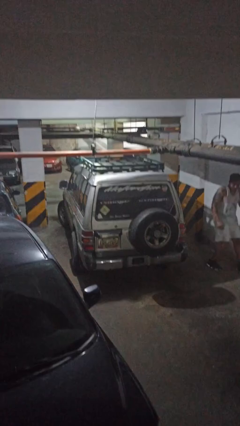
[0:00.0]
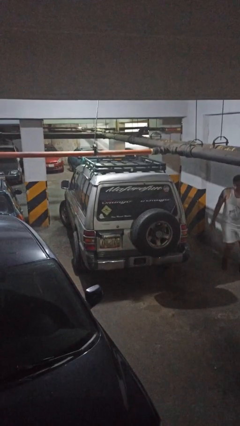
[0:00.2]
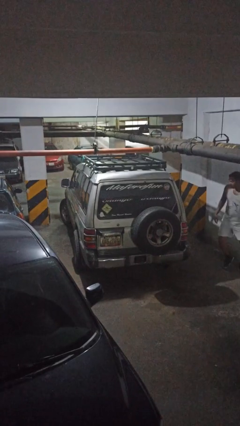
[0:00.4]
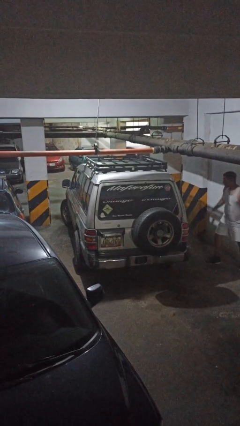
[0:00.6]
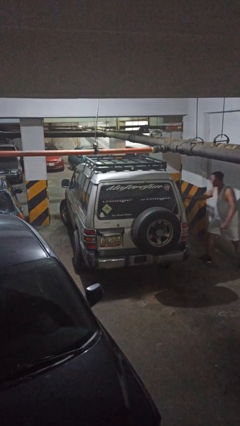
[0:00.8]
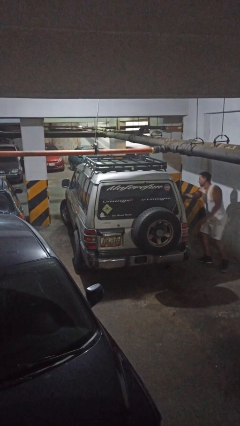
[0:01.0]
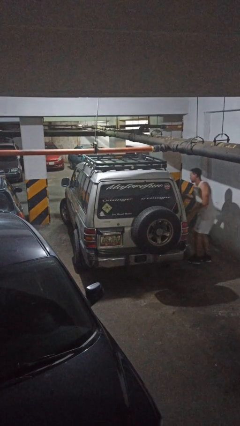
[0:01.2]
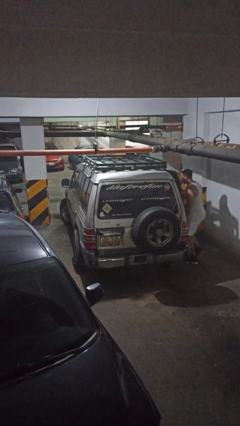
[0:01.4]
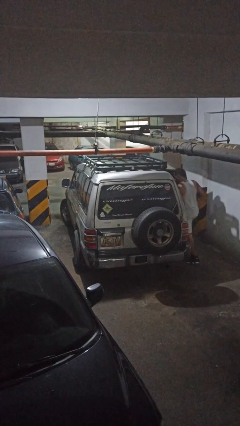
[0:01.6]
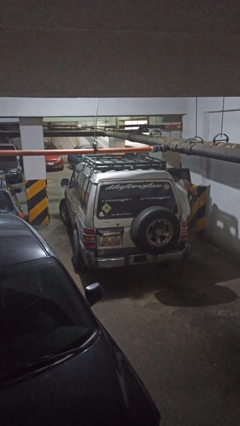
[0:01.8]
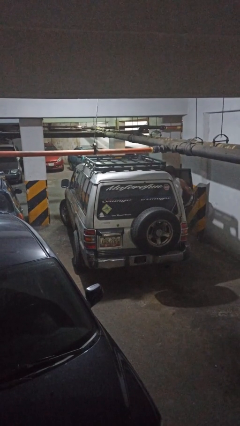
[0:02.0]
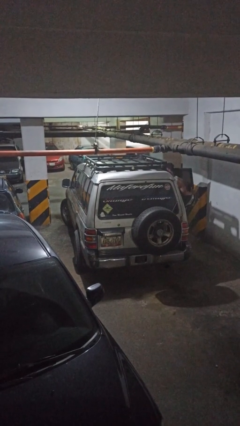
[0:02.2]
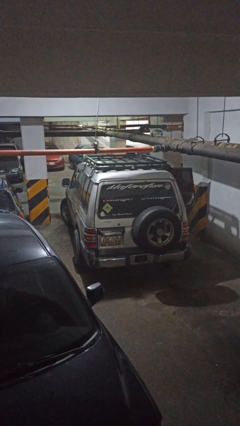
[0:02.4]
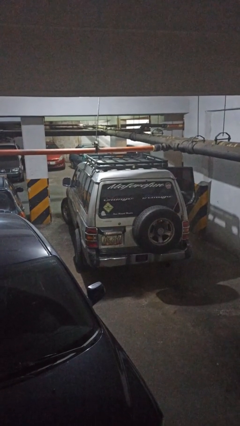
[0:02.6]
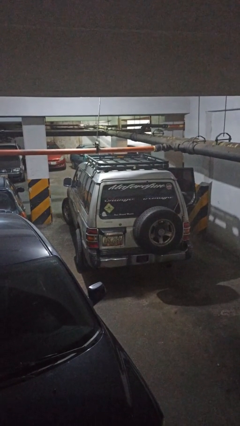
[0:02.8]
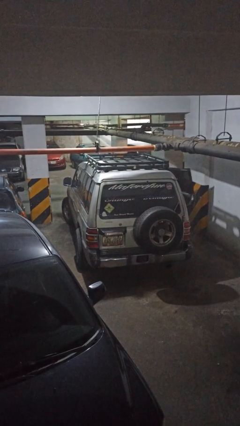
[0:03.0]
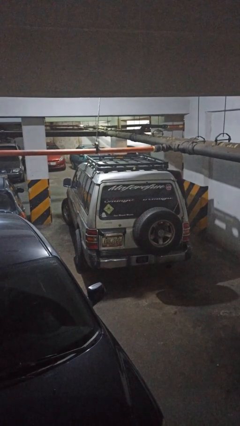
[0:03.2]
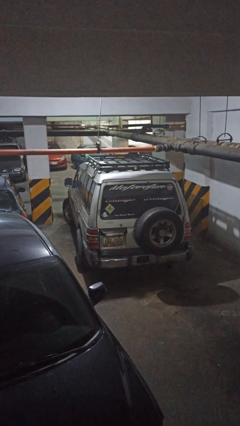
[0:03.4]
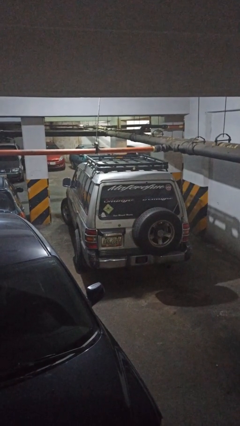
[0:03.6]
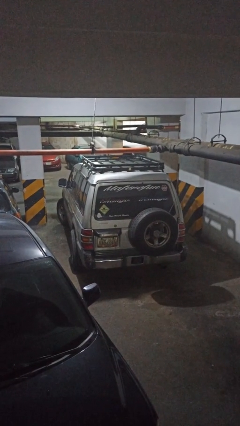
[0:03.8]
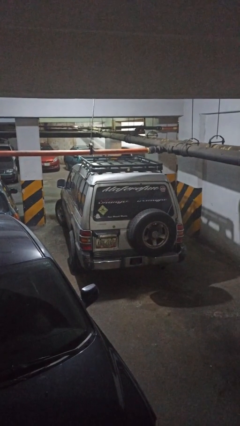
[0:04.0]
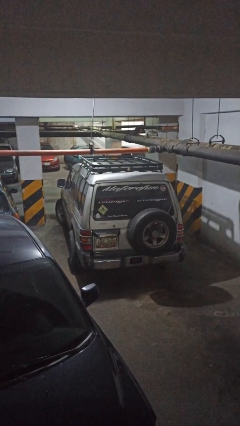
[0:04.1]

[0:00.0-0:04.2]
car picks up person

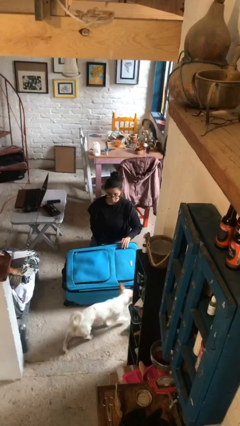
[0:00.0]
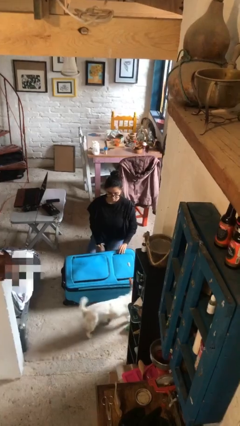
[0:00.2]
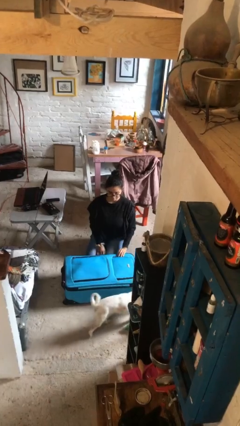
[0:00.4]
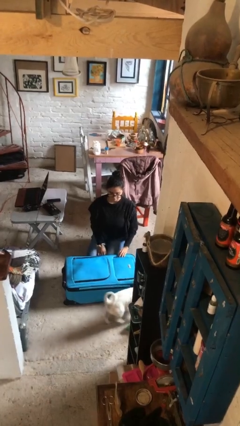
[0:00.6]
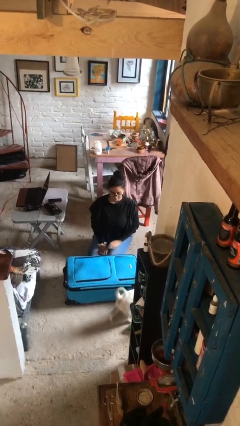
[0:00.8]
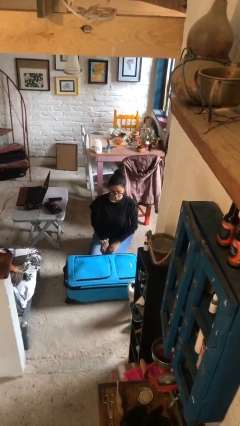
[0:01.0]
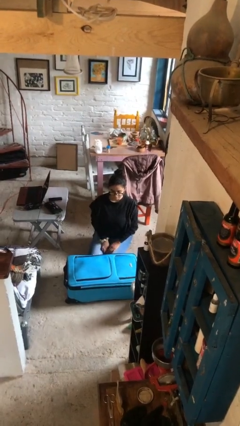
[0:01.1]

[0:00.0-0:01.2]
person closes suitcase

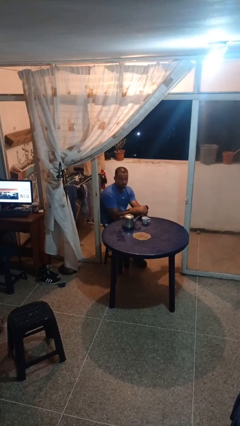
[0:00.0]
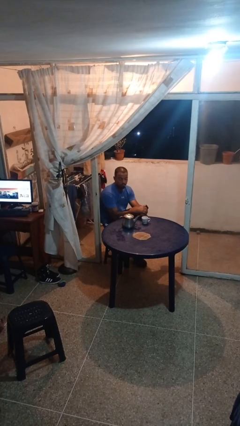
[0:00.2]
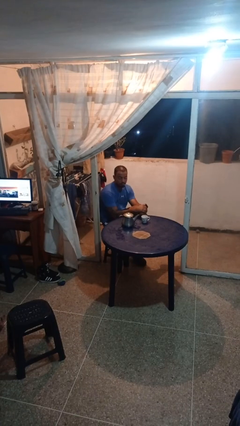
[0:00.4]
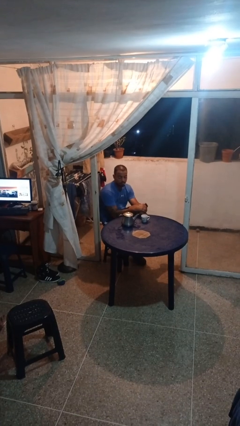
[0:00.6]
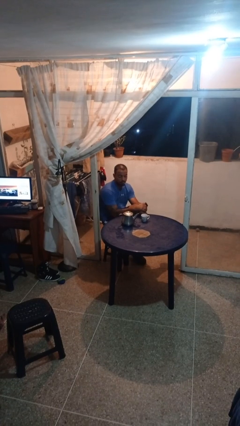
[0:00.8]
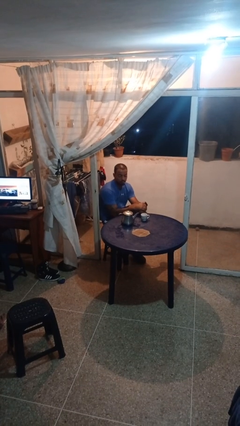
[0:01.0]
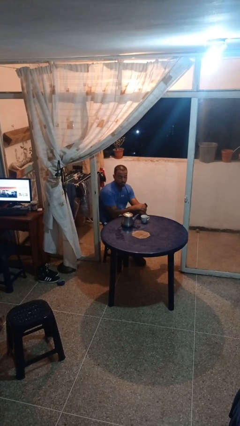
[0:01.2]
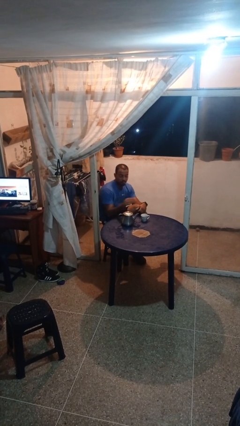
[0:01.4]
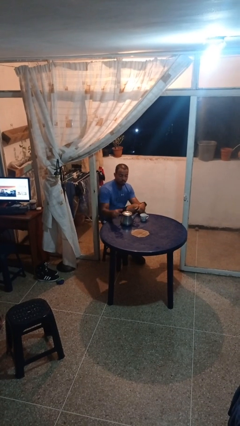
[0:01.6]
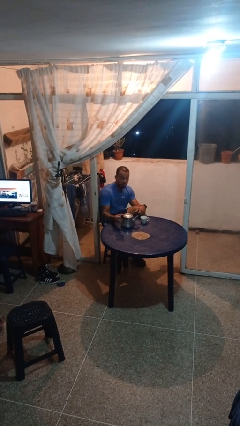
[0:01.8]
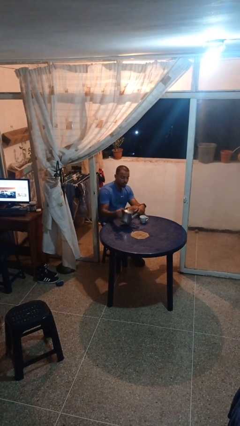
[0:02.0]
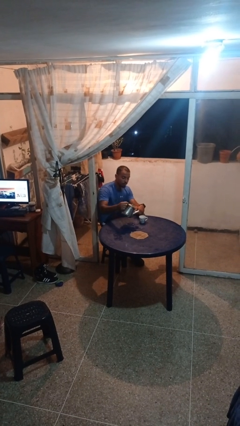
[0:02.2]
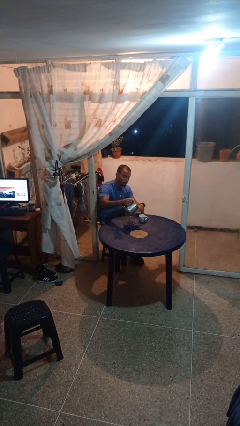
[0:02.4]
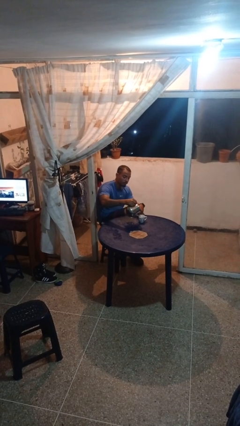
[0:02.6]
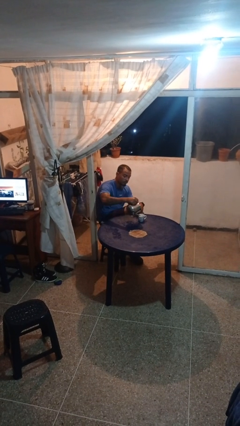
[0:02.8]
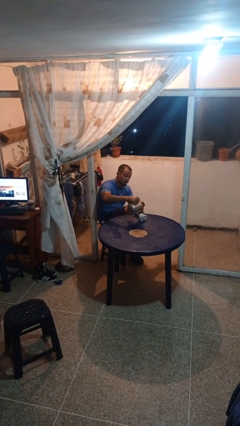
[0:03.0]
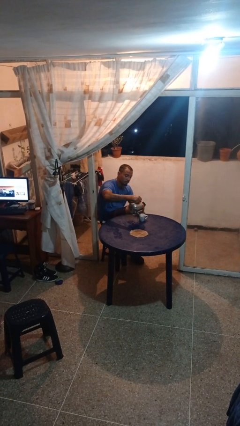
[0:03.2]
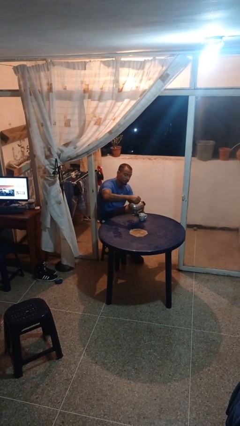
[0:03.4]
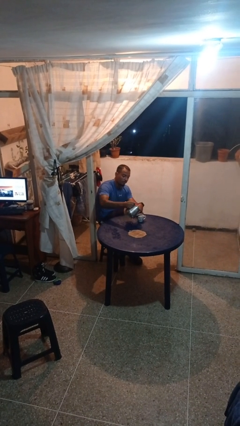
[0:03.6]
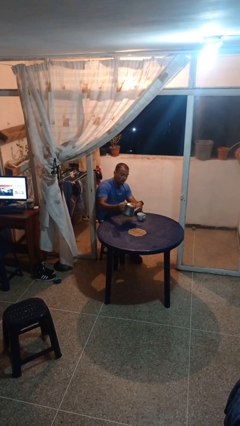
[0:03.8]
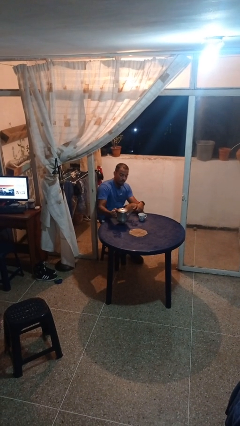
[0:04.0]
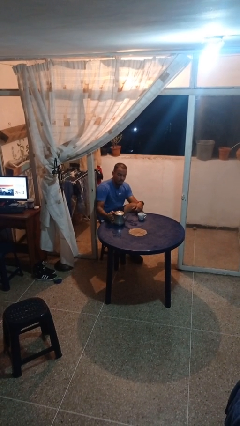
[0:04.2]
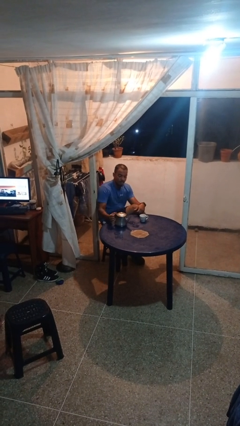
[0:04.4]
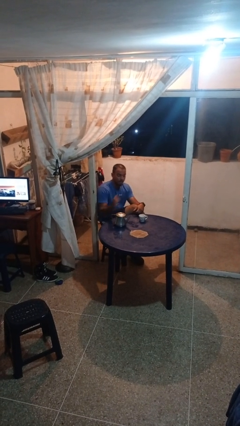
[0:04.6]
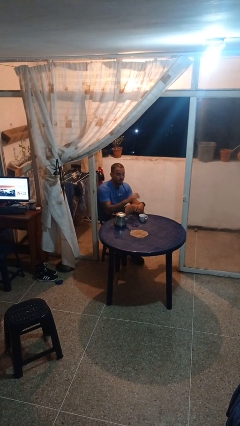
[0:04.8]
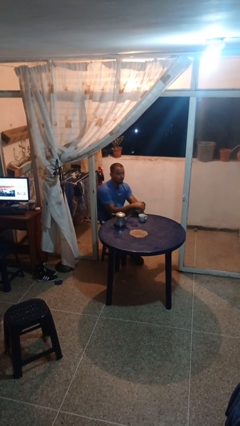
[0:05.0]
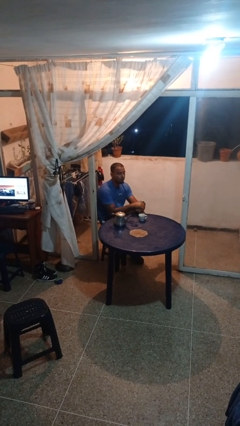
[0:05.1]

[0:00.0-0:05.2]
person pours coffee into mug

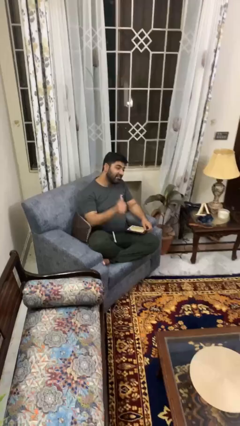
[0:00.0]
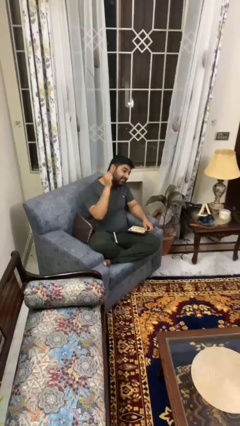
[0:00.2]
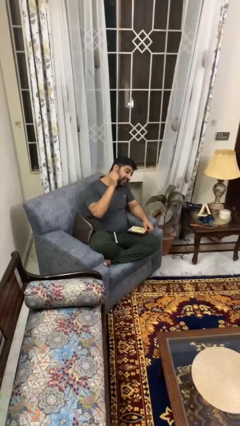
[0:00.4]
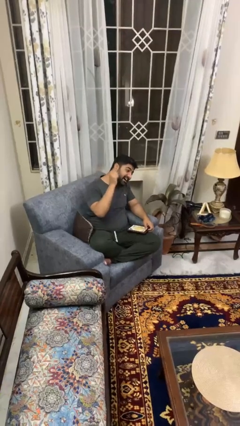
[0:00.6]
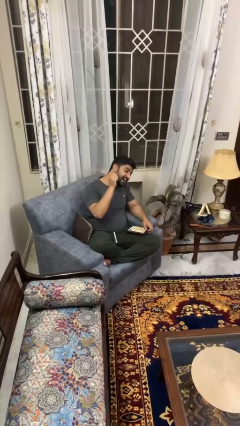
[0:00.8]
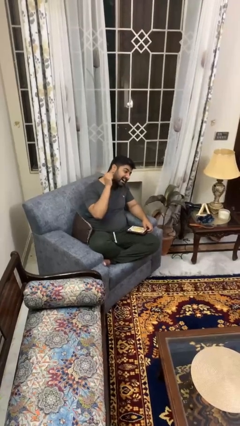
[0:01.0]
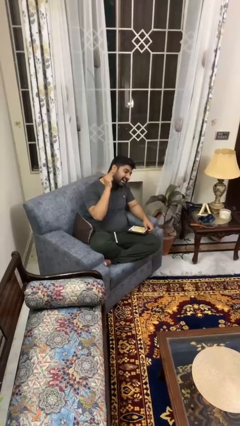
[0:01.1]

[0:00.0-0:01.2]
person gestures behind me

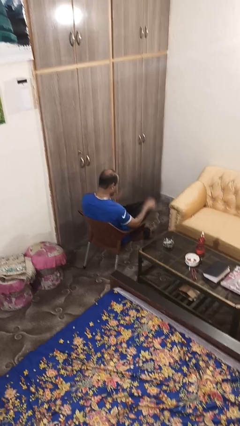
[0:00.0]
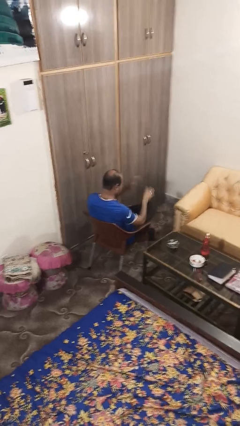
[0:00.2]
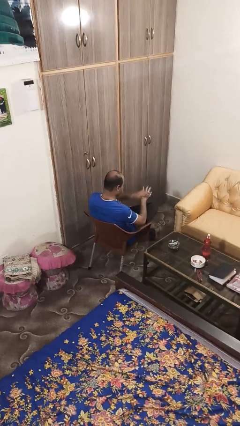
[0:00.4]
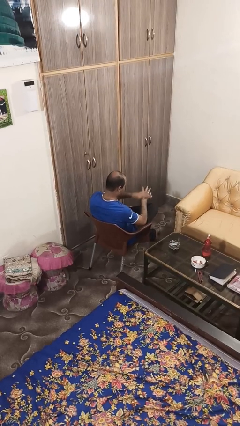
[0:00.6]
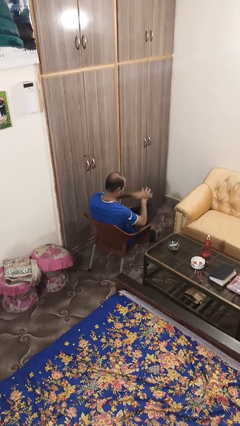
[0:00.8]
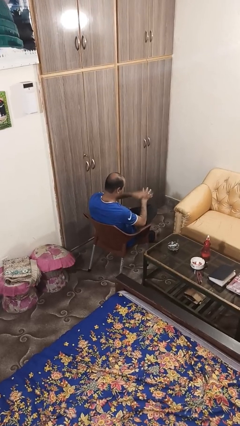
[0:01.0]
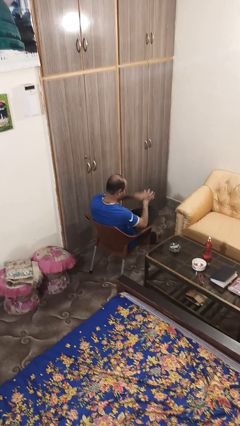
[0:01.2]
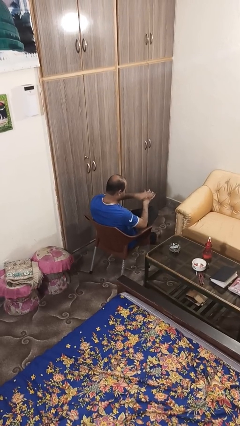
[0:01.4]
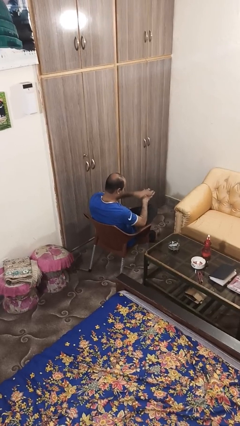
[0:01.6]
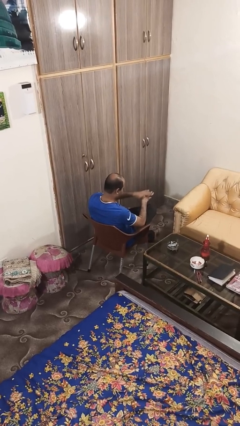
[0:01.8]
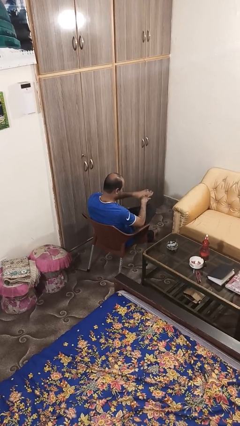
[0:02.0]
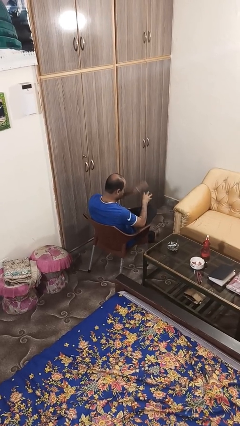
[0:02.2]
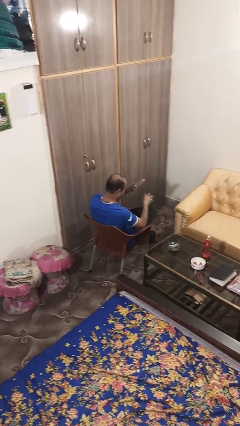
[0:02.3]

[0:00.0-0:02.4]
person swats bug

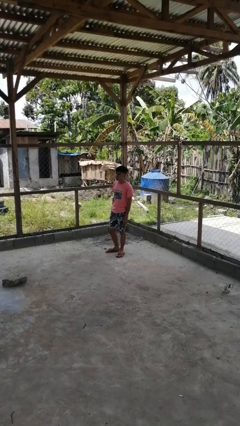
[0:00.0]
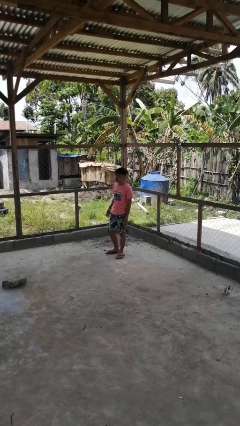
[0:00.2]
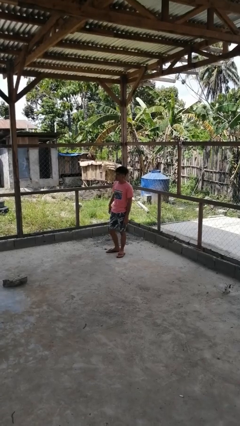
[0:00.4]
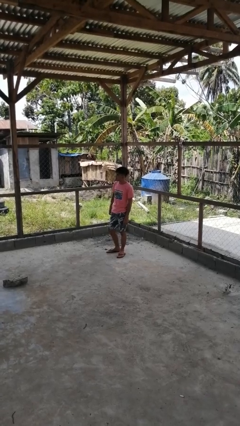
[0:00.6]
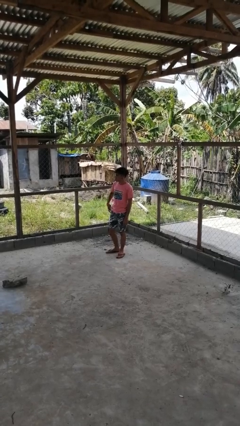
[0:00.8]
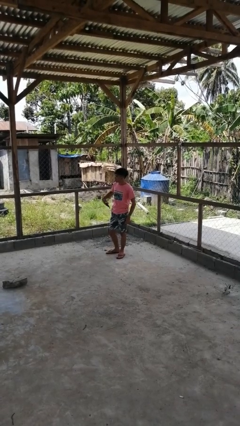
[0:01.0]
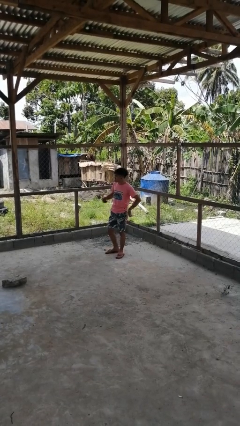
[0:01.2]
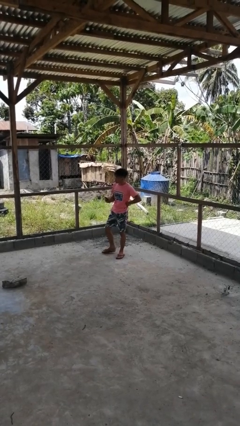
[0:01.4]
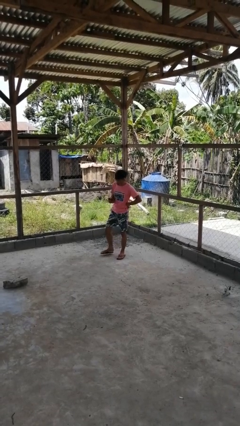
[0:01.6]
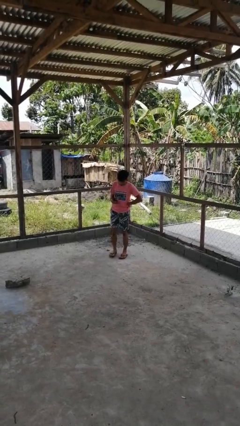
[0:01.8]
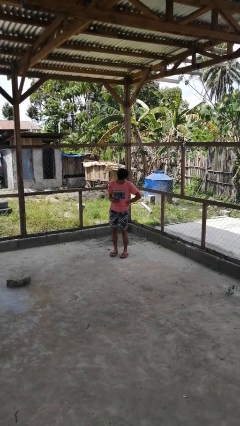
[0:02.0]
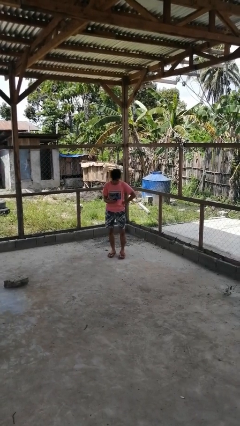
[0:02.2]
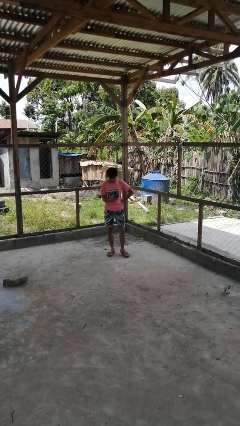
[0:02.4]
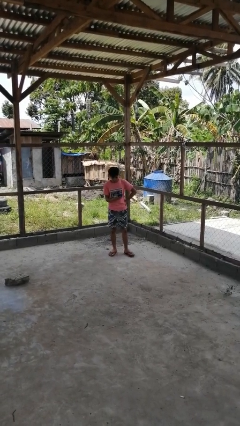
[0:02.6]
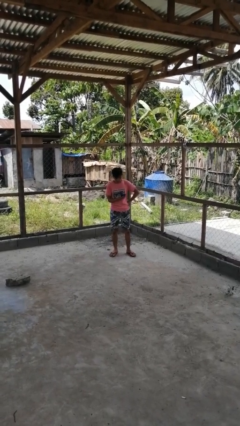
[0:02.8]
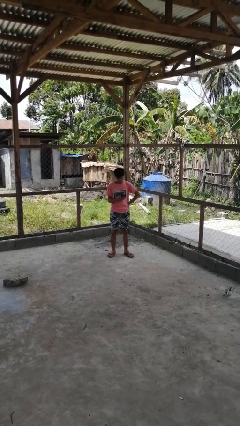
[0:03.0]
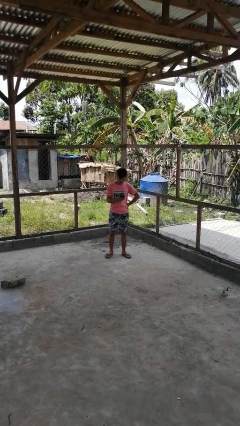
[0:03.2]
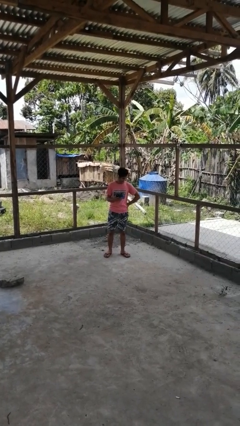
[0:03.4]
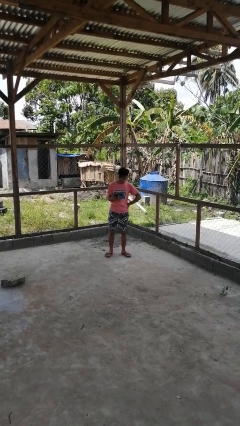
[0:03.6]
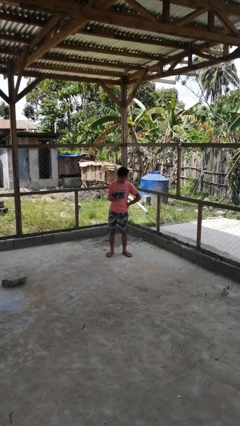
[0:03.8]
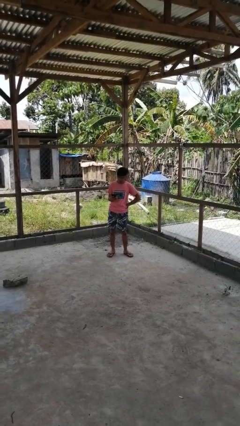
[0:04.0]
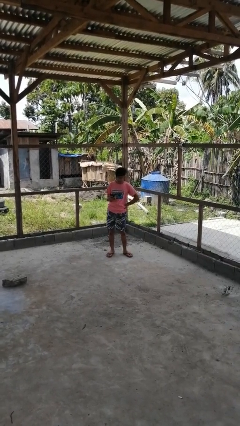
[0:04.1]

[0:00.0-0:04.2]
person takes phone from pocket
